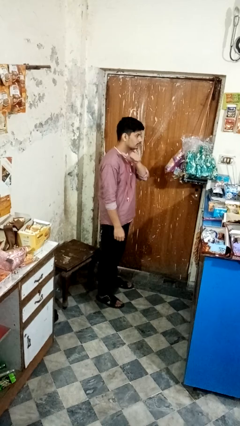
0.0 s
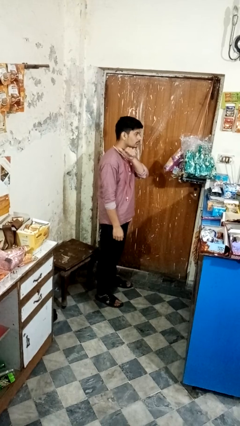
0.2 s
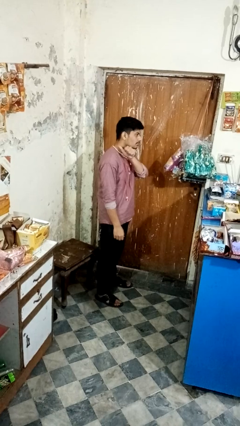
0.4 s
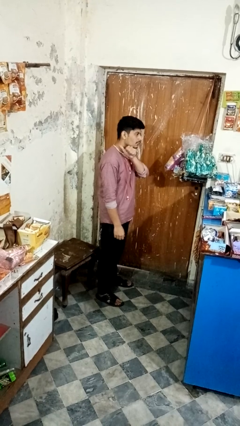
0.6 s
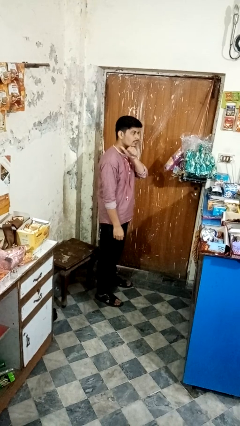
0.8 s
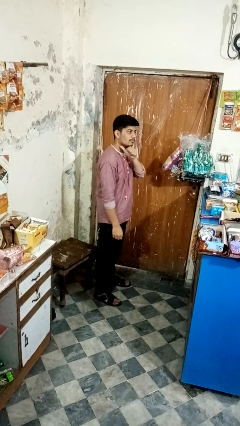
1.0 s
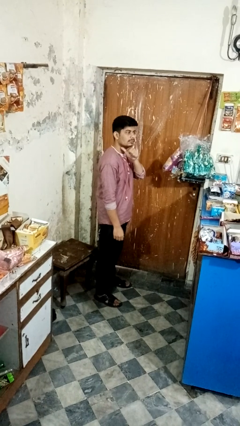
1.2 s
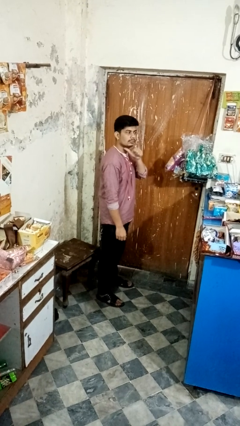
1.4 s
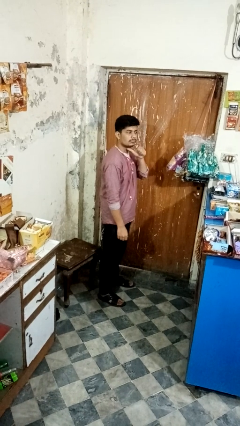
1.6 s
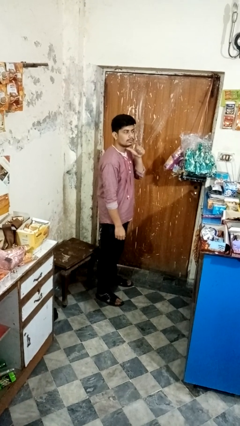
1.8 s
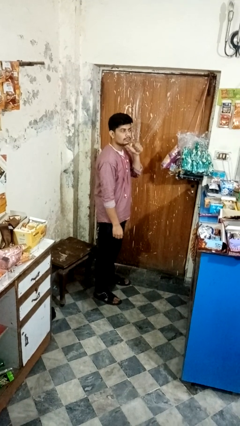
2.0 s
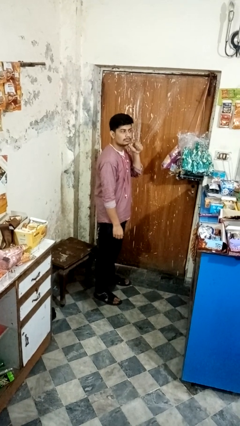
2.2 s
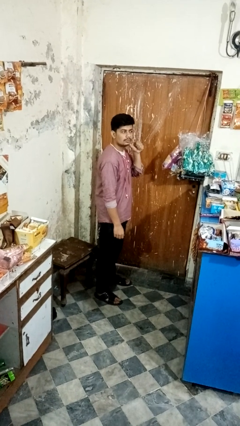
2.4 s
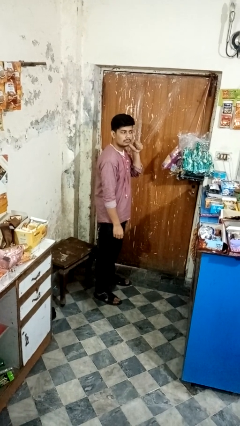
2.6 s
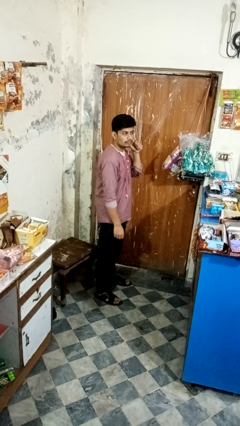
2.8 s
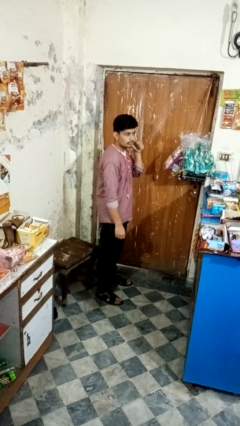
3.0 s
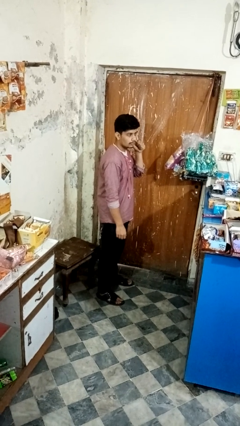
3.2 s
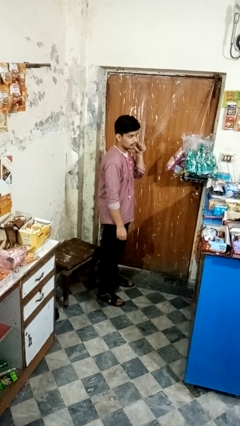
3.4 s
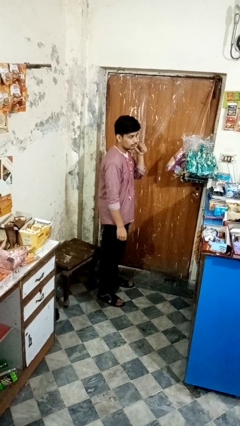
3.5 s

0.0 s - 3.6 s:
person gestures cut

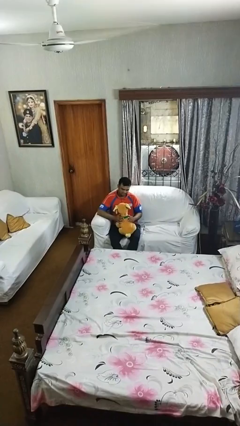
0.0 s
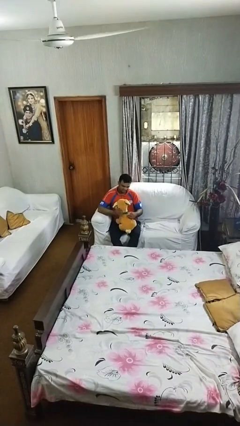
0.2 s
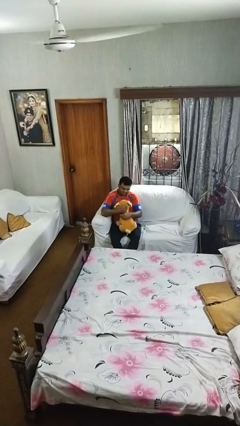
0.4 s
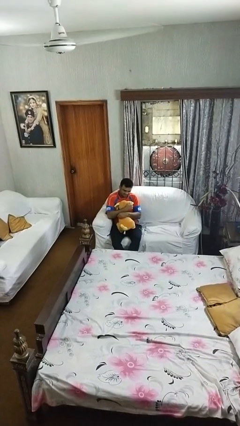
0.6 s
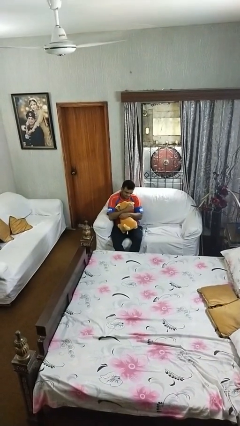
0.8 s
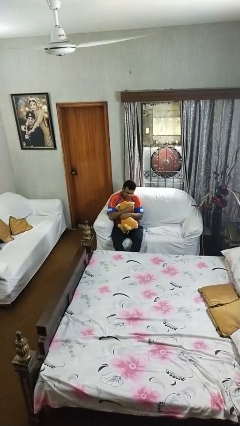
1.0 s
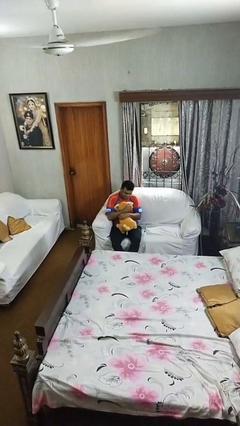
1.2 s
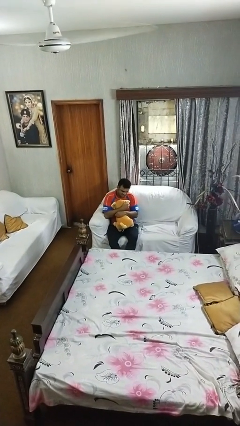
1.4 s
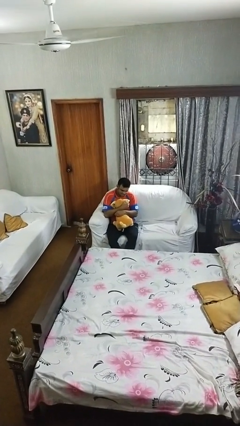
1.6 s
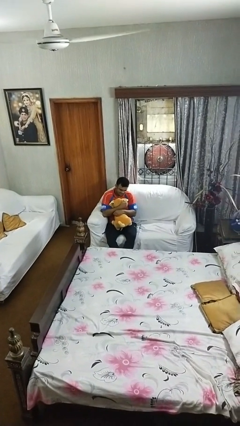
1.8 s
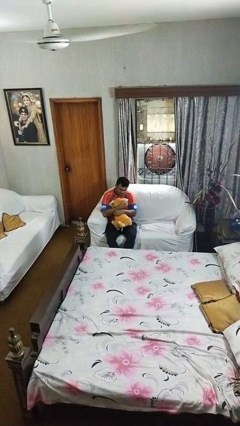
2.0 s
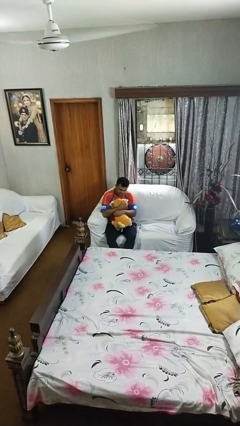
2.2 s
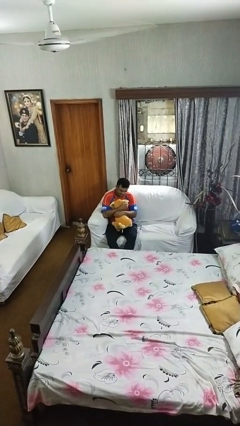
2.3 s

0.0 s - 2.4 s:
person hugs stuffed animal

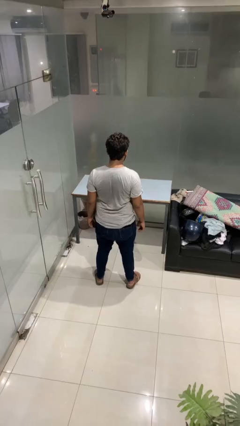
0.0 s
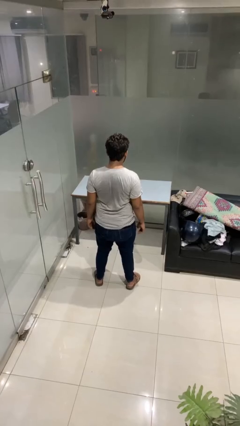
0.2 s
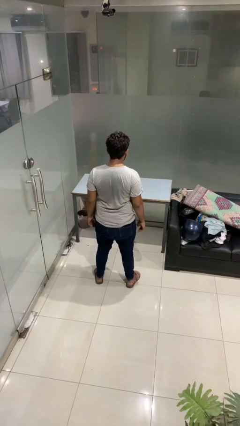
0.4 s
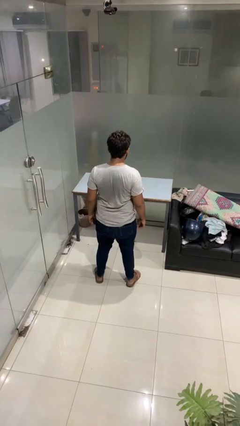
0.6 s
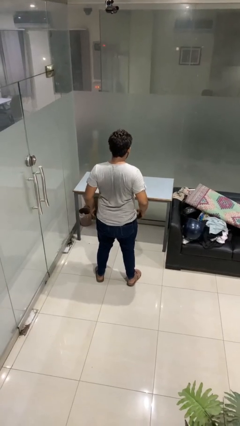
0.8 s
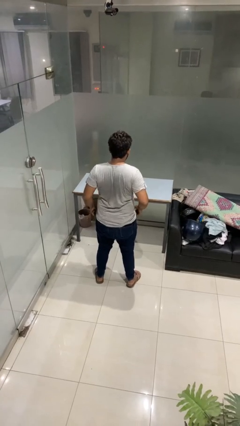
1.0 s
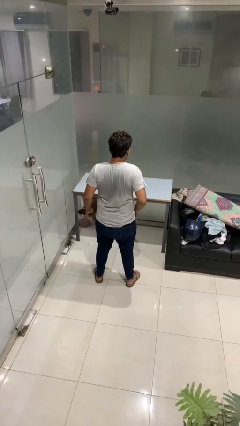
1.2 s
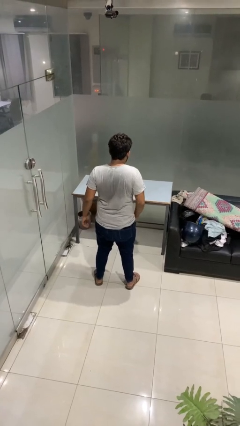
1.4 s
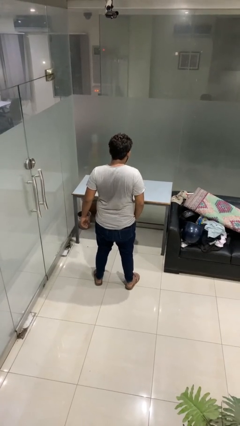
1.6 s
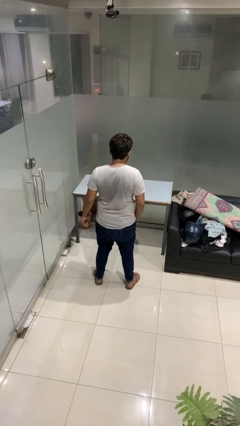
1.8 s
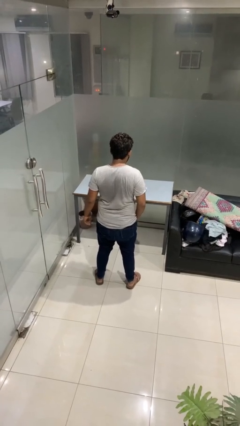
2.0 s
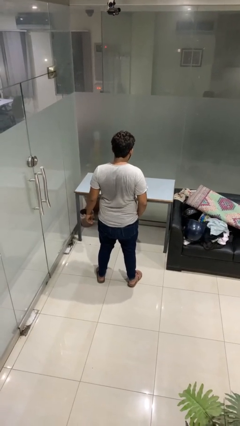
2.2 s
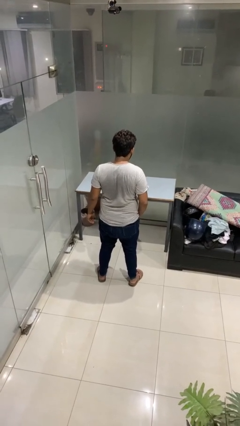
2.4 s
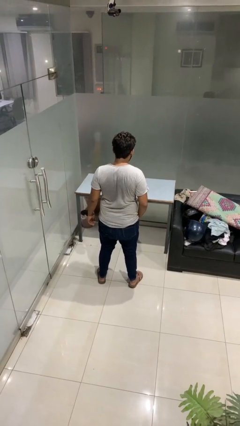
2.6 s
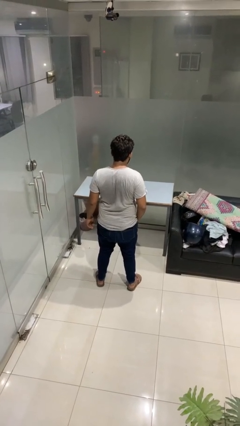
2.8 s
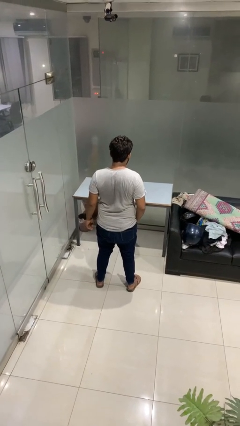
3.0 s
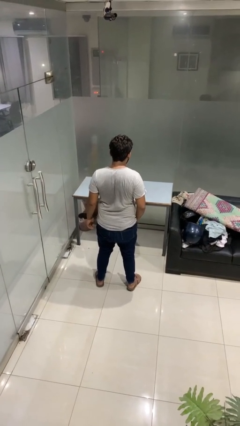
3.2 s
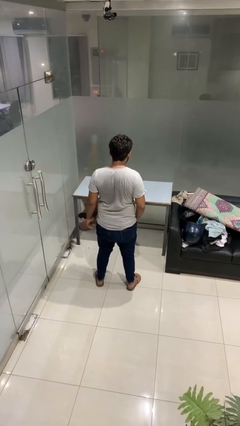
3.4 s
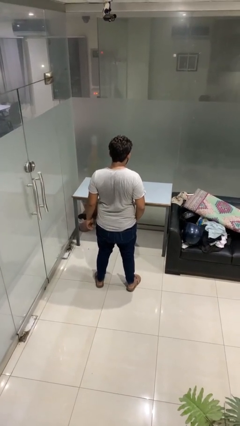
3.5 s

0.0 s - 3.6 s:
person puts hands in back pockets

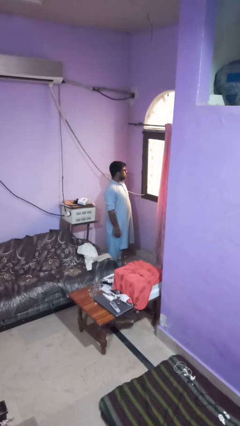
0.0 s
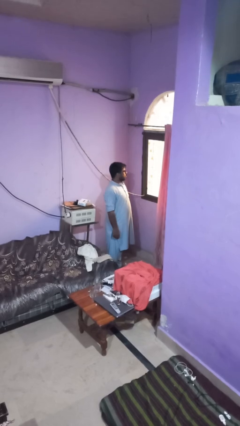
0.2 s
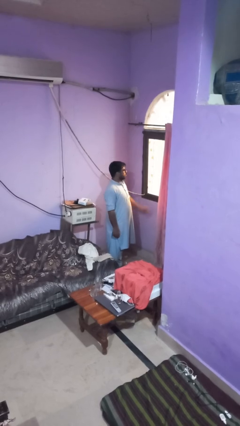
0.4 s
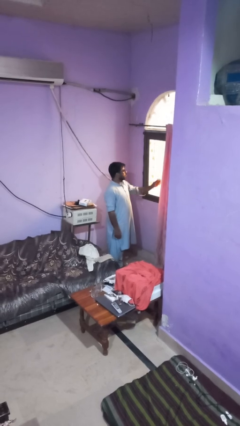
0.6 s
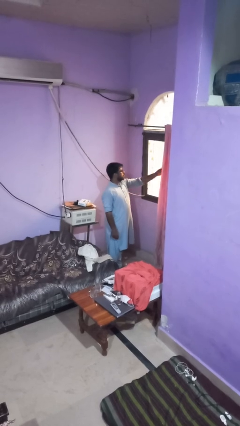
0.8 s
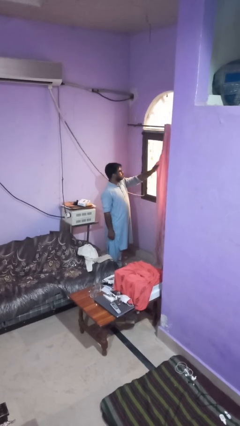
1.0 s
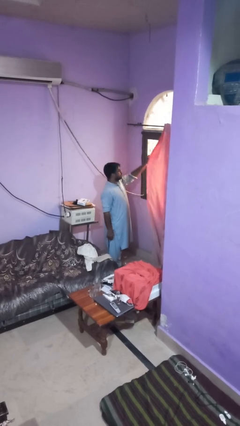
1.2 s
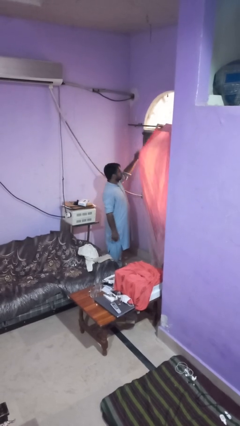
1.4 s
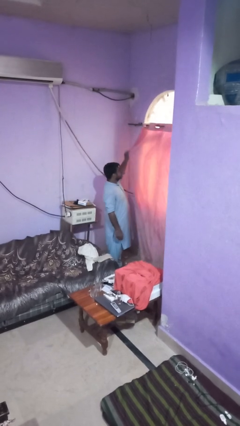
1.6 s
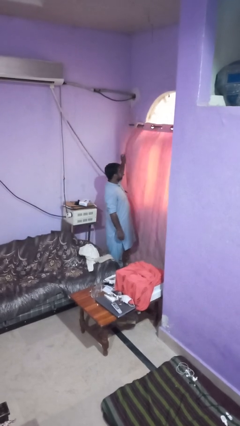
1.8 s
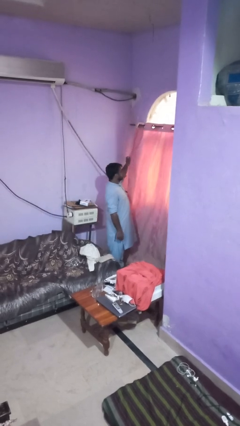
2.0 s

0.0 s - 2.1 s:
person closes curtains

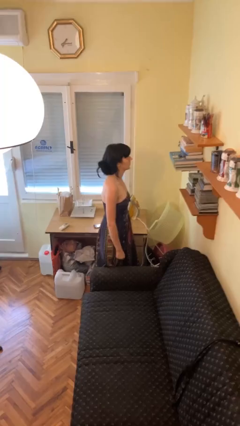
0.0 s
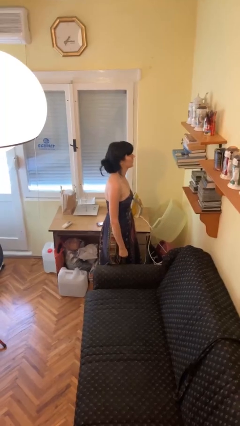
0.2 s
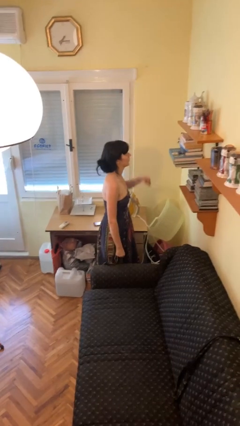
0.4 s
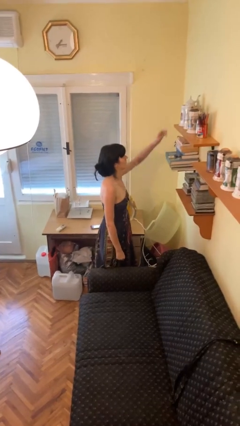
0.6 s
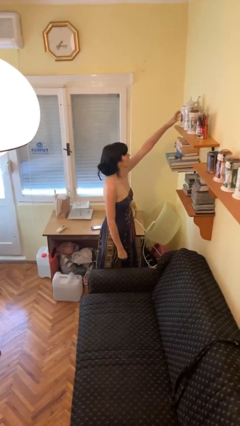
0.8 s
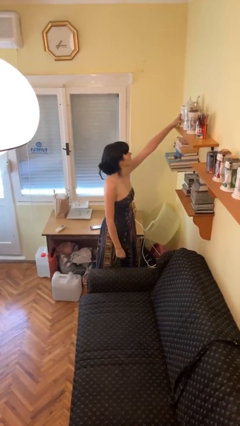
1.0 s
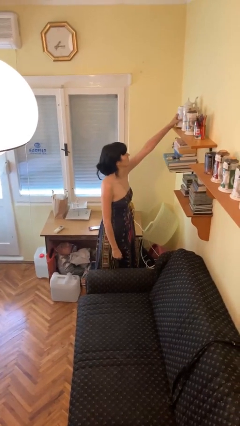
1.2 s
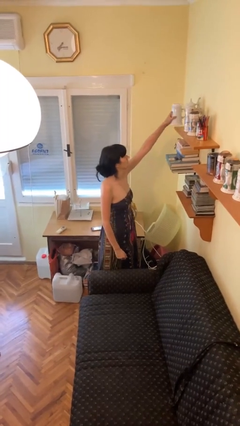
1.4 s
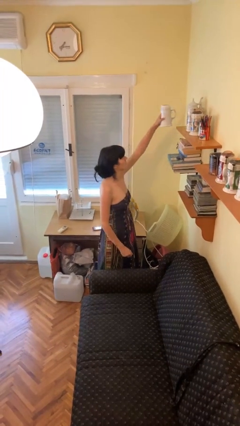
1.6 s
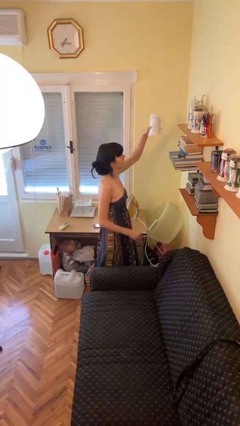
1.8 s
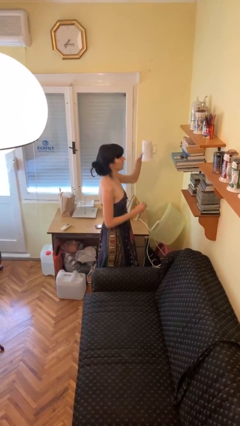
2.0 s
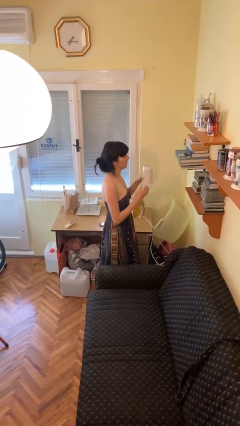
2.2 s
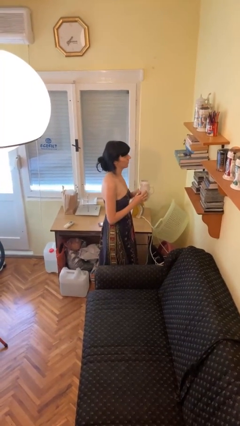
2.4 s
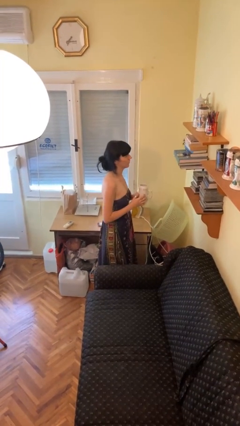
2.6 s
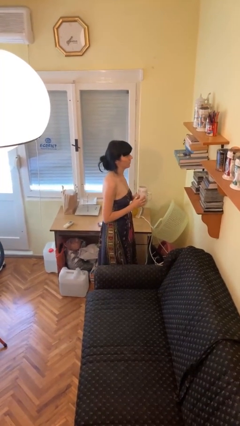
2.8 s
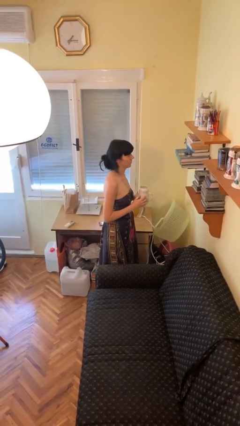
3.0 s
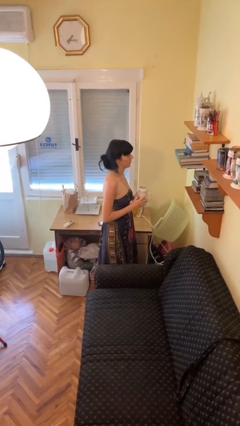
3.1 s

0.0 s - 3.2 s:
person picks up object from shelf

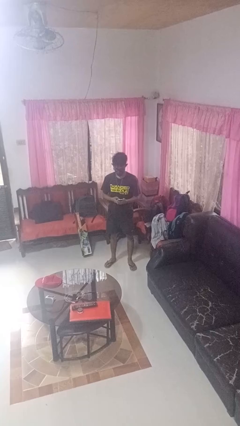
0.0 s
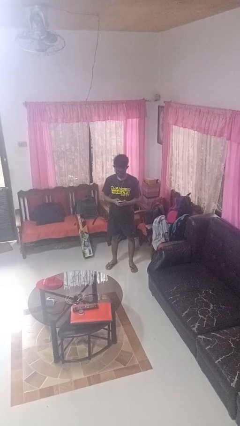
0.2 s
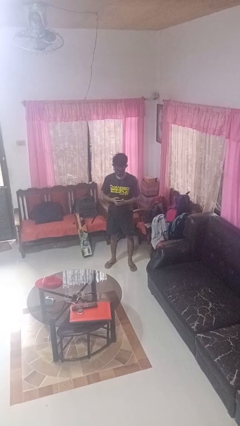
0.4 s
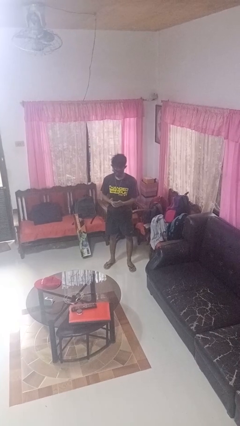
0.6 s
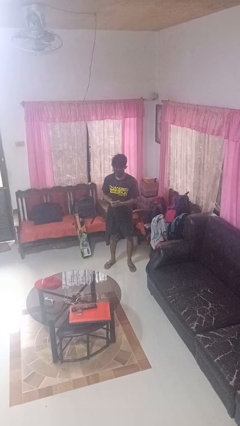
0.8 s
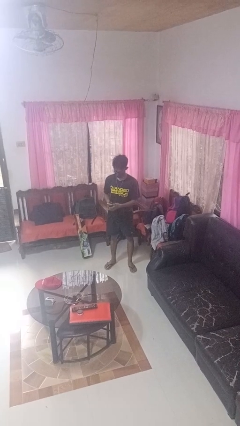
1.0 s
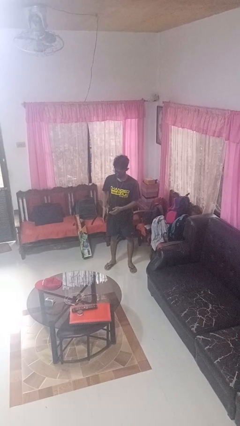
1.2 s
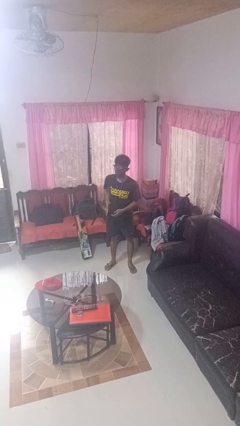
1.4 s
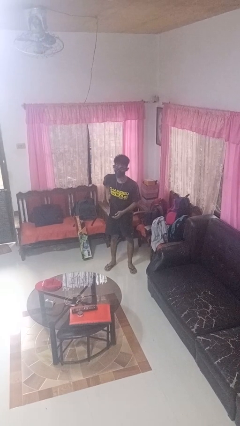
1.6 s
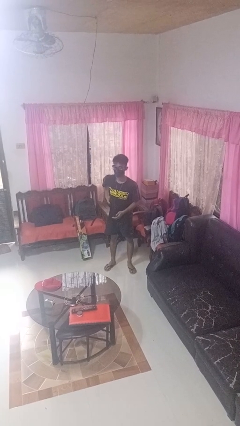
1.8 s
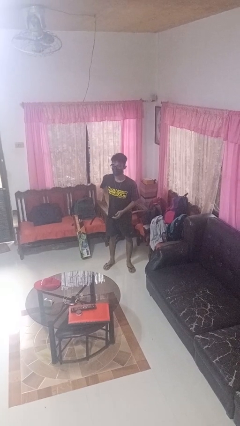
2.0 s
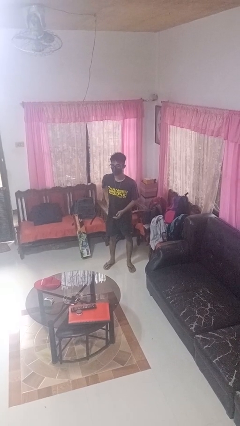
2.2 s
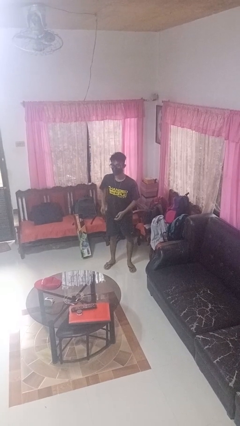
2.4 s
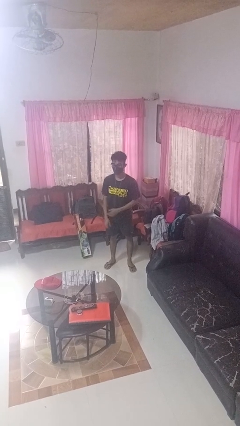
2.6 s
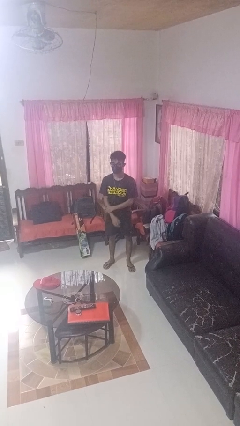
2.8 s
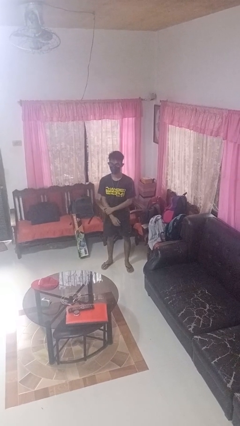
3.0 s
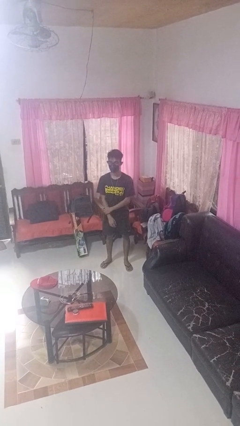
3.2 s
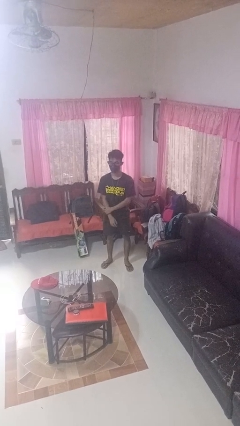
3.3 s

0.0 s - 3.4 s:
person puts phone into pocket
